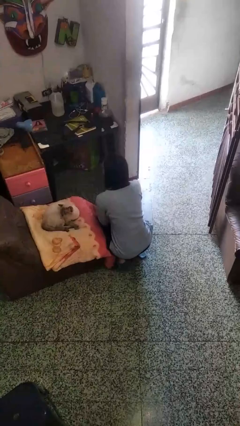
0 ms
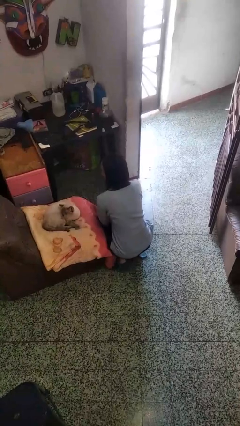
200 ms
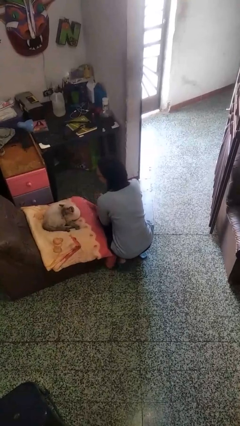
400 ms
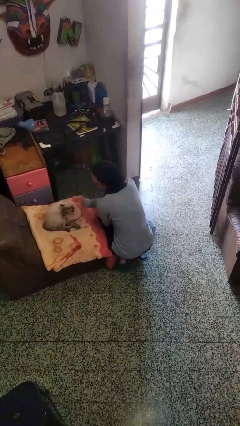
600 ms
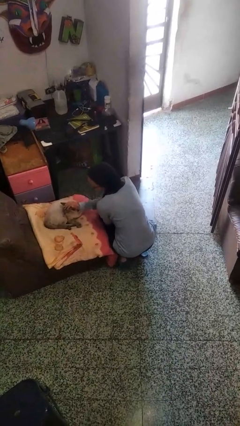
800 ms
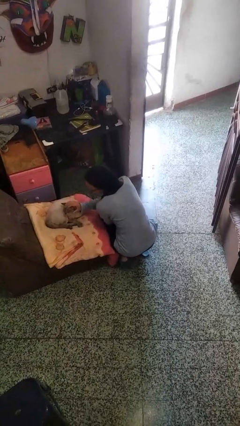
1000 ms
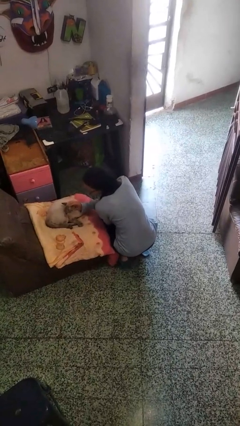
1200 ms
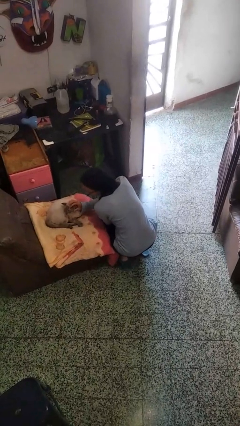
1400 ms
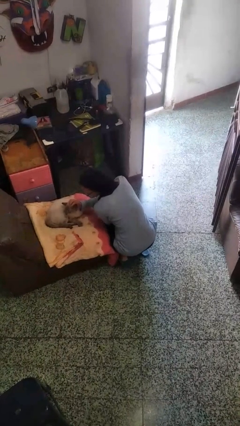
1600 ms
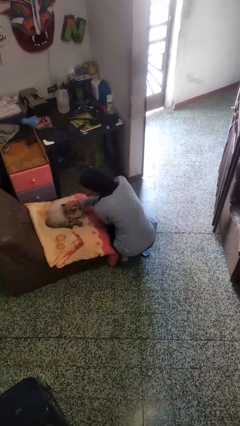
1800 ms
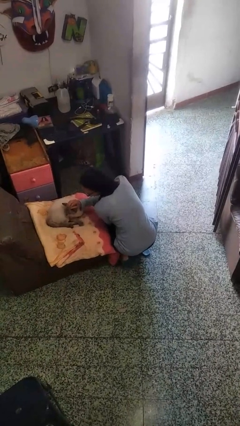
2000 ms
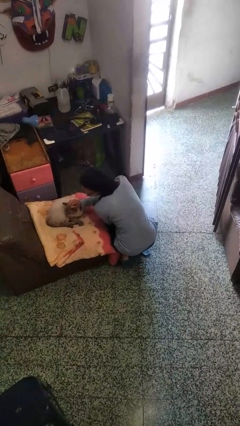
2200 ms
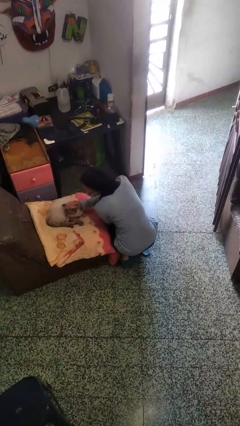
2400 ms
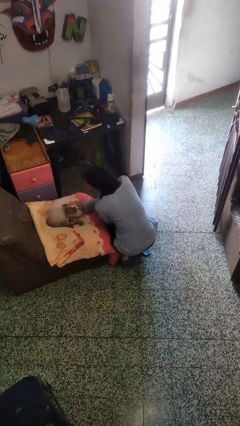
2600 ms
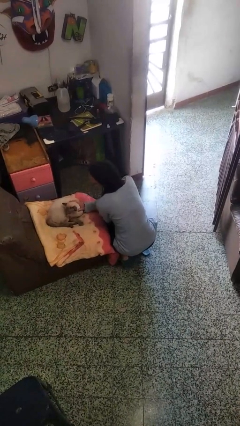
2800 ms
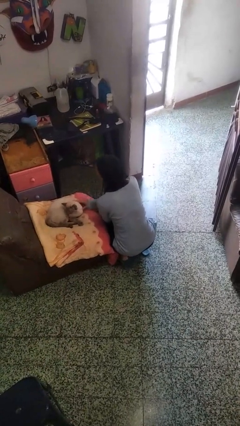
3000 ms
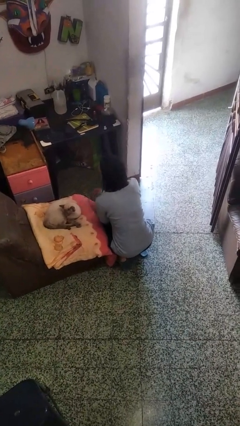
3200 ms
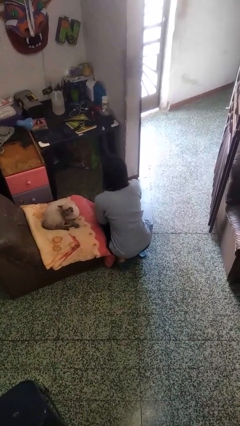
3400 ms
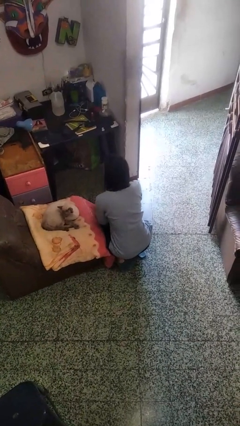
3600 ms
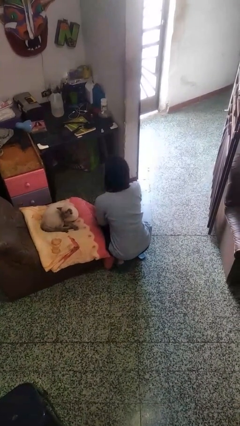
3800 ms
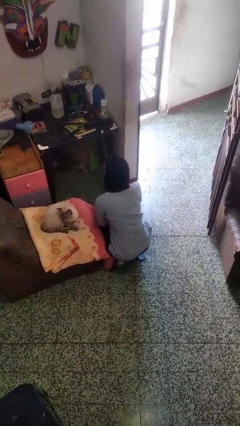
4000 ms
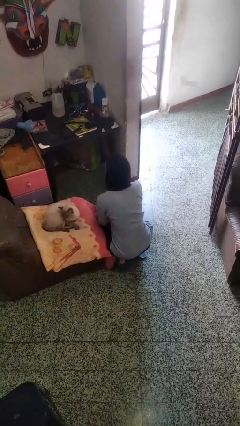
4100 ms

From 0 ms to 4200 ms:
person pets cat

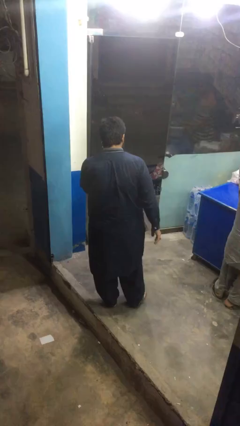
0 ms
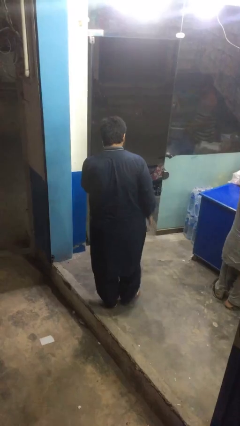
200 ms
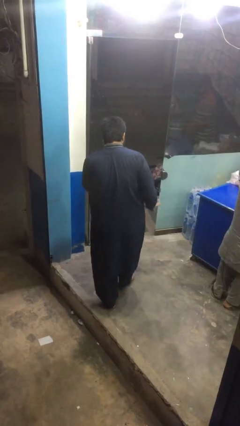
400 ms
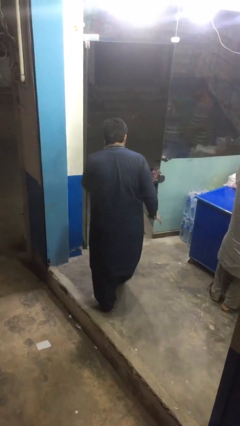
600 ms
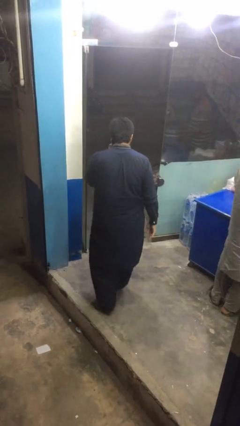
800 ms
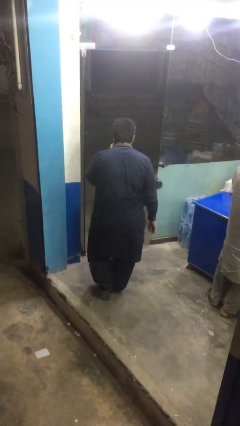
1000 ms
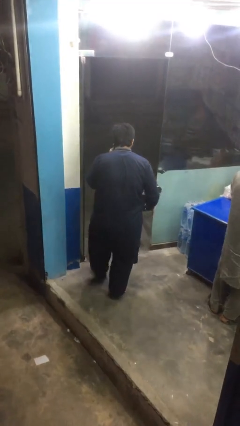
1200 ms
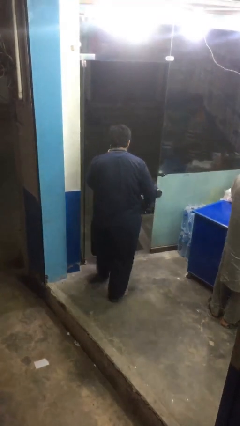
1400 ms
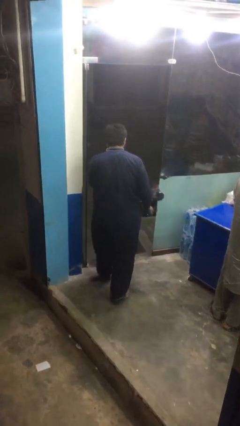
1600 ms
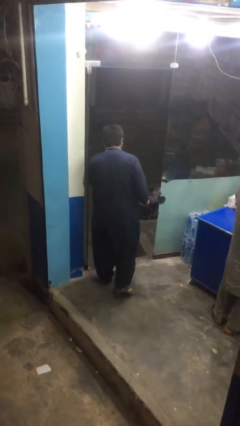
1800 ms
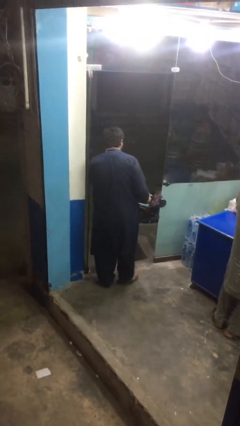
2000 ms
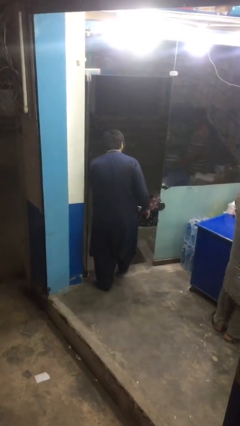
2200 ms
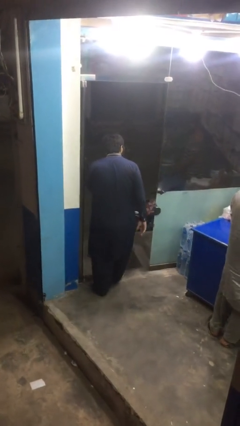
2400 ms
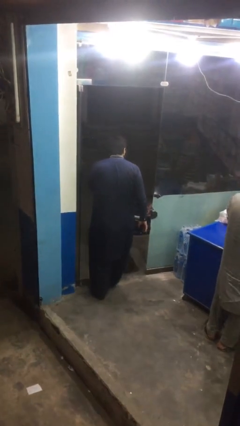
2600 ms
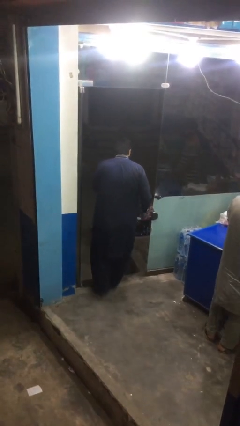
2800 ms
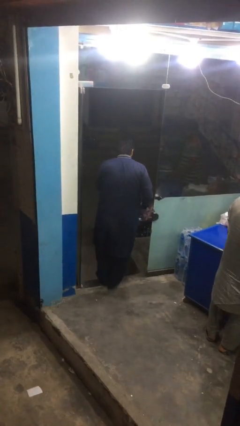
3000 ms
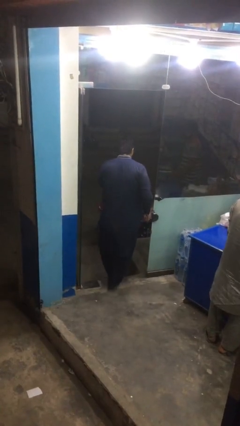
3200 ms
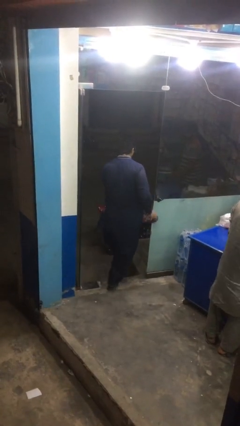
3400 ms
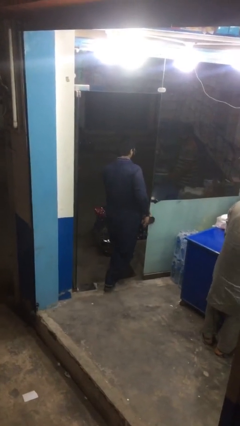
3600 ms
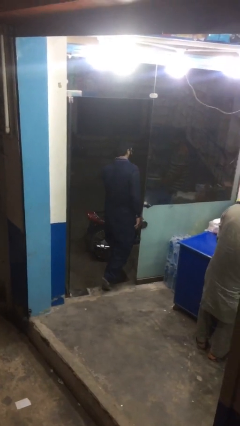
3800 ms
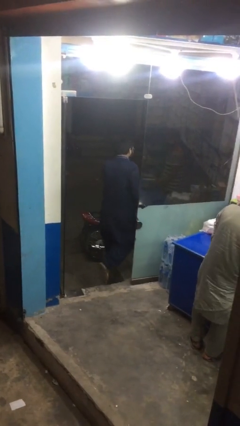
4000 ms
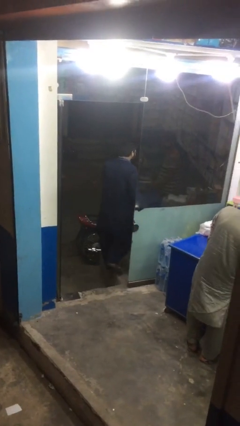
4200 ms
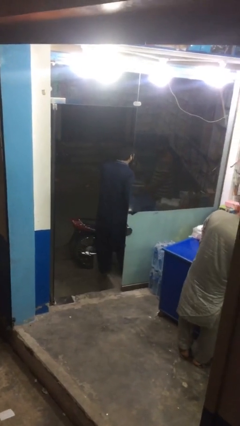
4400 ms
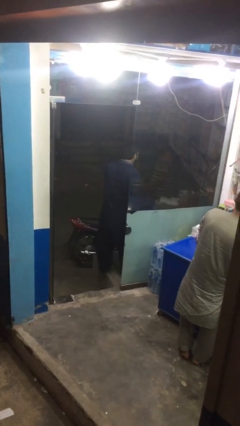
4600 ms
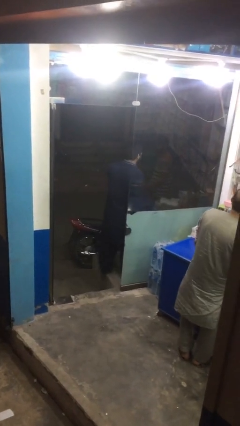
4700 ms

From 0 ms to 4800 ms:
person exits scene through structure

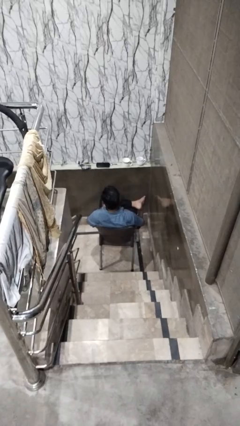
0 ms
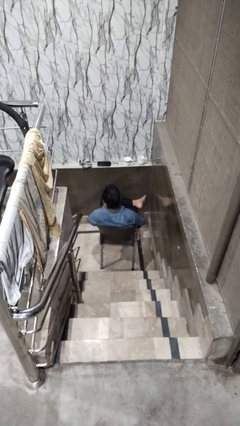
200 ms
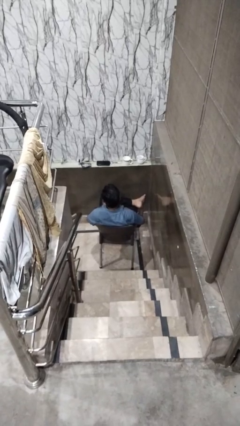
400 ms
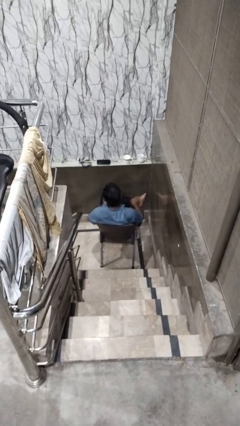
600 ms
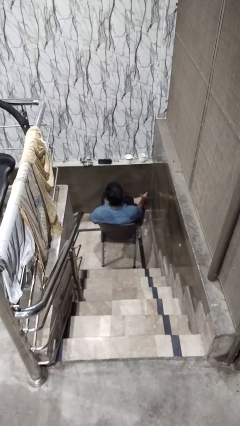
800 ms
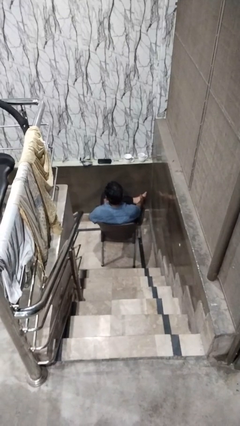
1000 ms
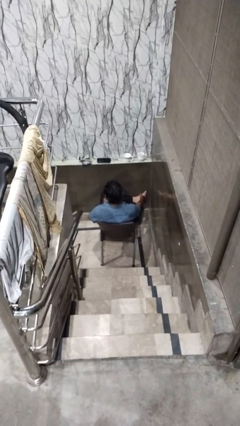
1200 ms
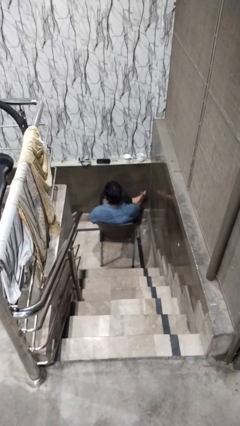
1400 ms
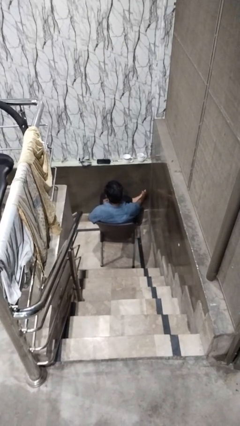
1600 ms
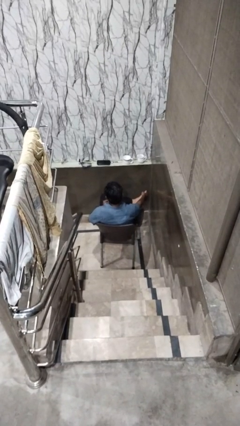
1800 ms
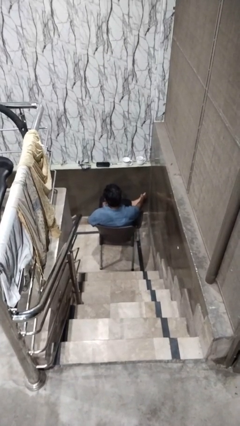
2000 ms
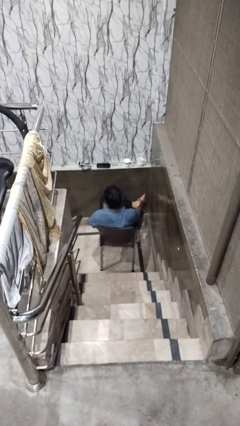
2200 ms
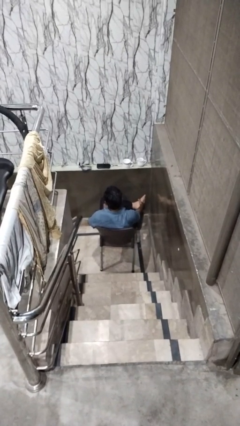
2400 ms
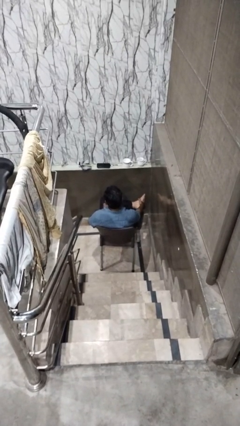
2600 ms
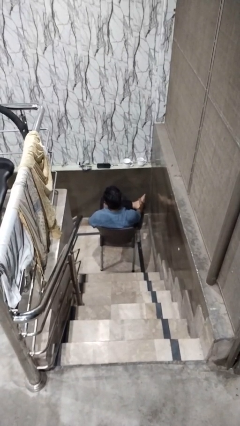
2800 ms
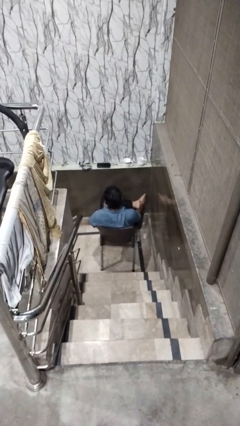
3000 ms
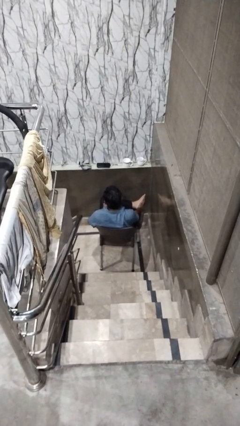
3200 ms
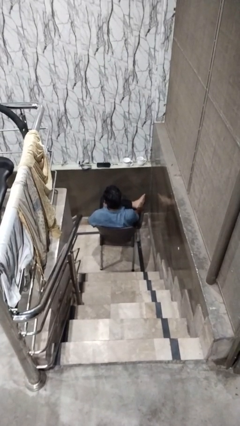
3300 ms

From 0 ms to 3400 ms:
person rubs foot

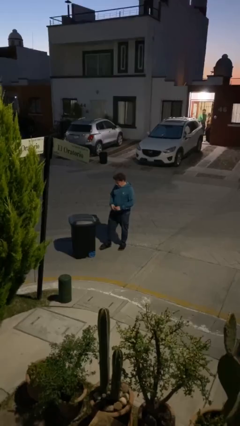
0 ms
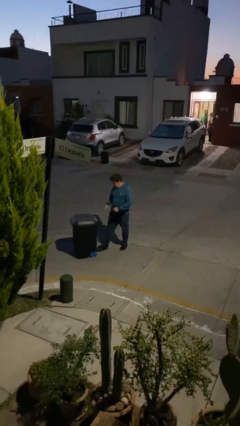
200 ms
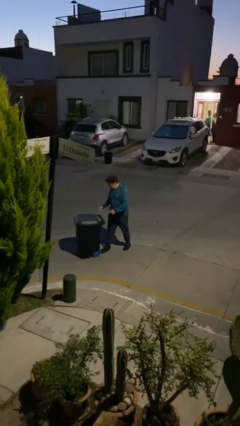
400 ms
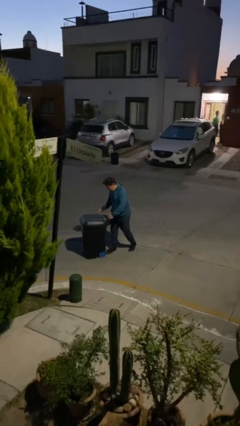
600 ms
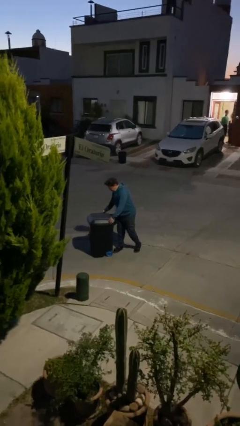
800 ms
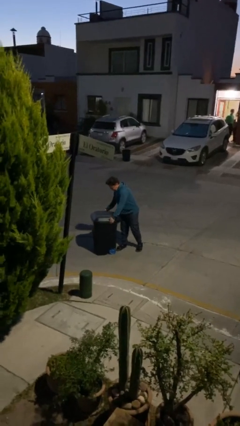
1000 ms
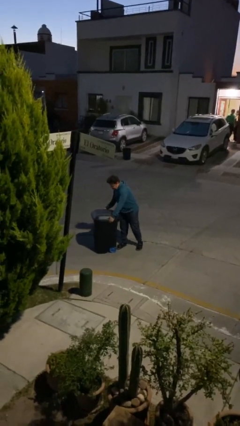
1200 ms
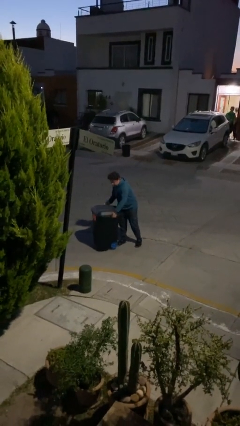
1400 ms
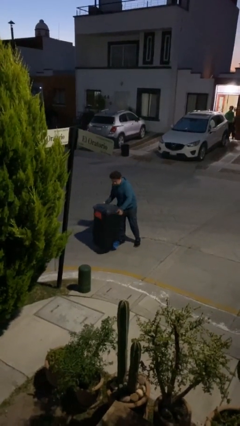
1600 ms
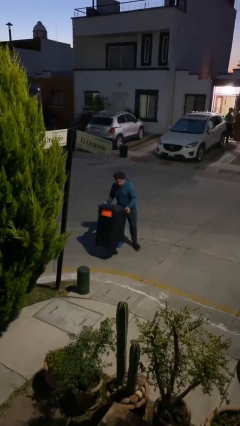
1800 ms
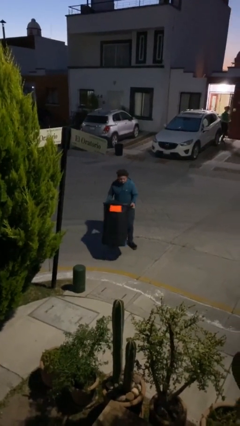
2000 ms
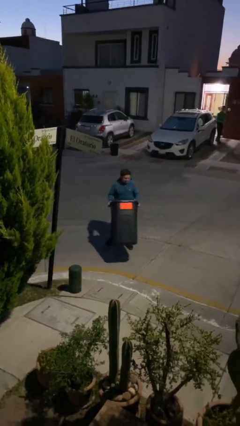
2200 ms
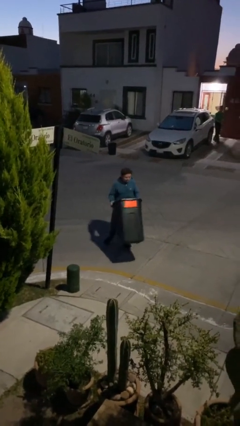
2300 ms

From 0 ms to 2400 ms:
person picks up object from floor

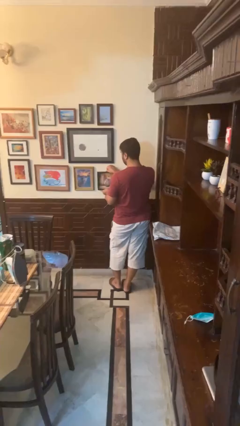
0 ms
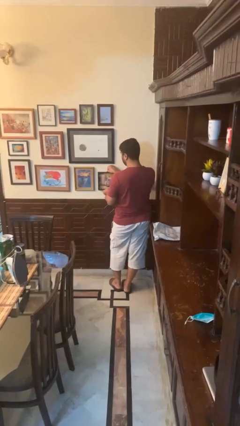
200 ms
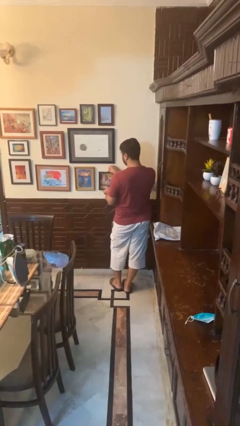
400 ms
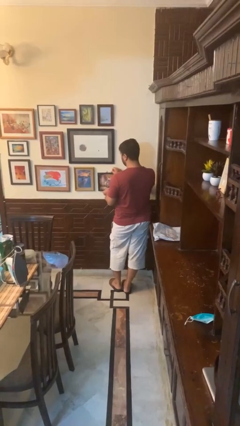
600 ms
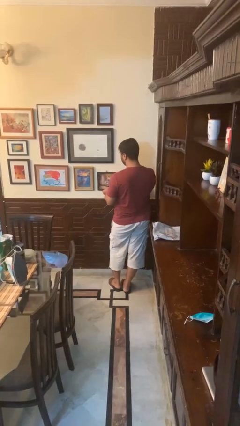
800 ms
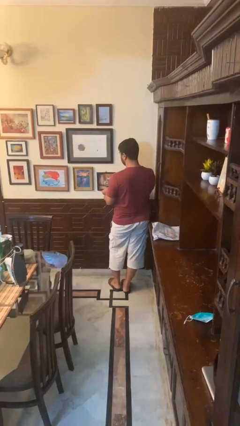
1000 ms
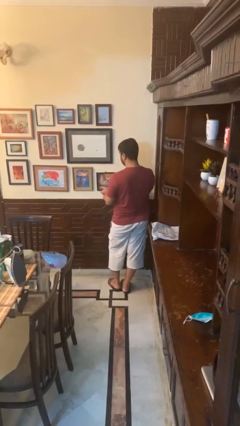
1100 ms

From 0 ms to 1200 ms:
person puts up picture frame

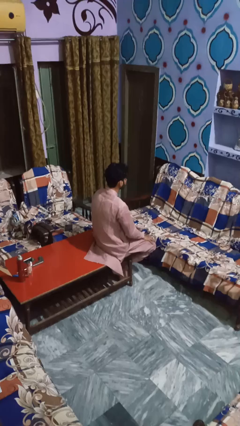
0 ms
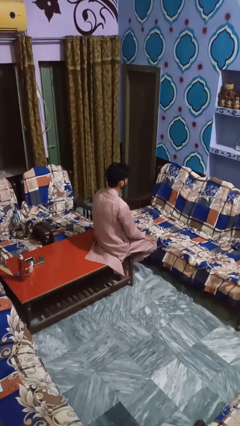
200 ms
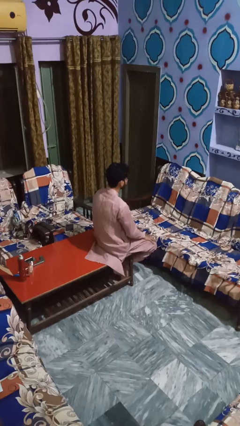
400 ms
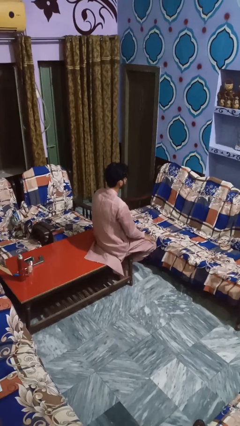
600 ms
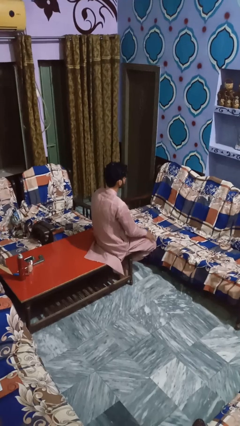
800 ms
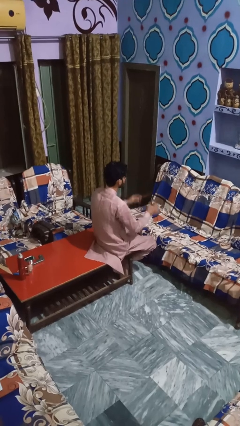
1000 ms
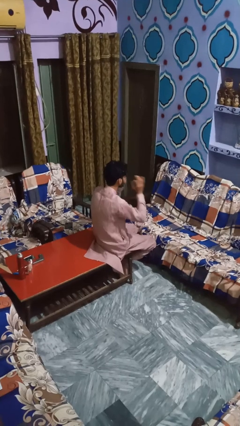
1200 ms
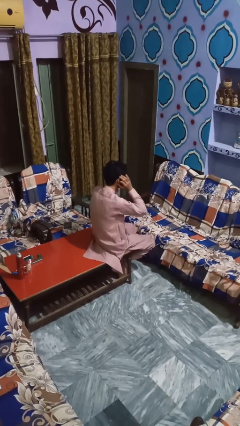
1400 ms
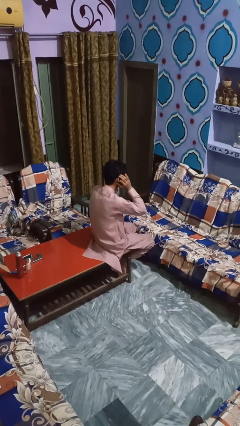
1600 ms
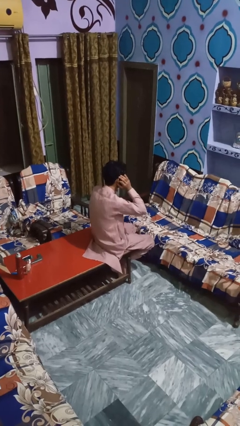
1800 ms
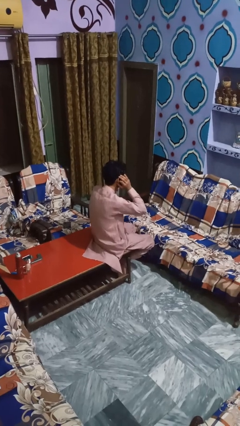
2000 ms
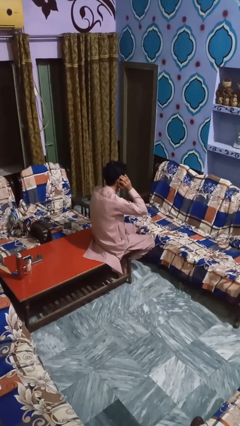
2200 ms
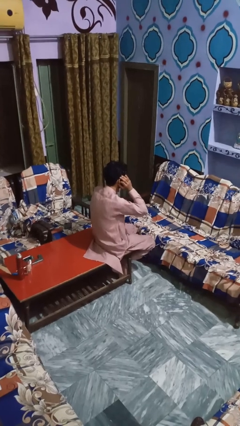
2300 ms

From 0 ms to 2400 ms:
person puts fingers in ear
